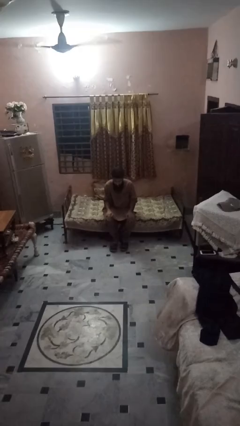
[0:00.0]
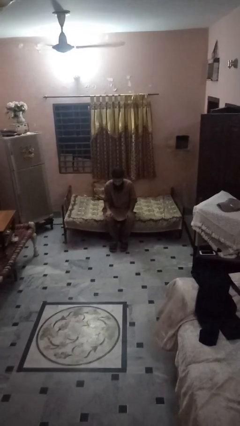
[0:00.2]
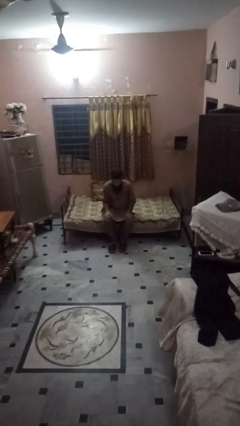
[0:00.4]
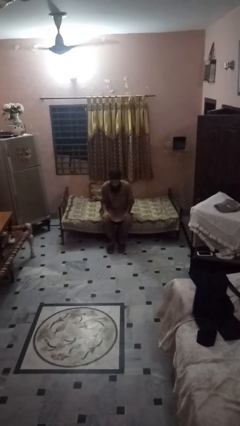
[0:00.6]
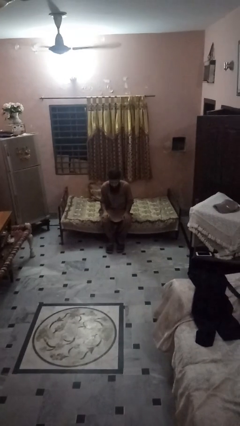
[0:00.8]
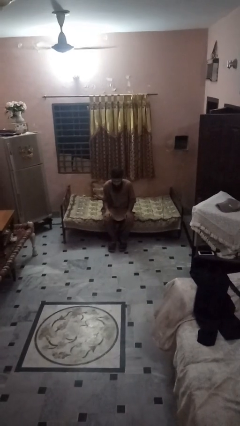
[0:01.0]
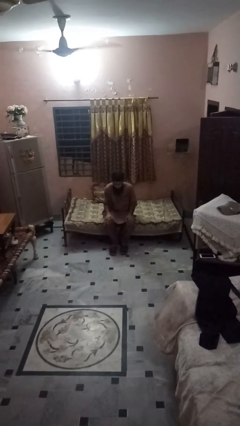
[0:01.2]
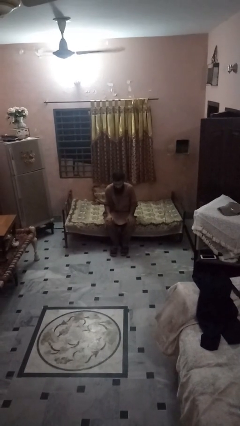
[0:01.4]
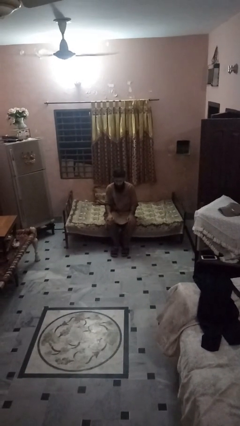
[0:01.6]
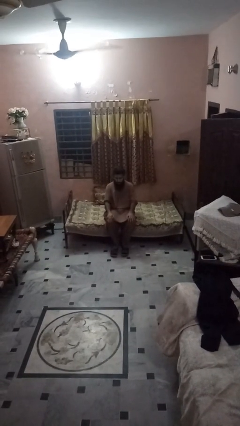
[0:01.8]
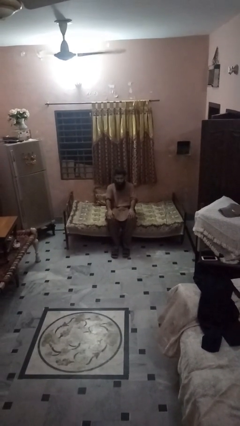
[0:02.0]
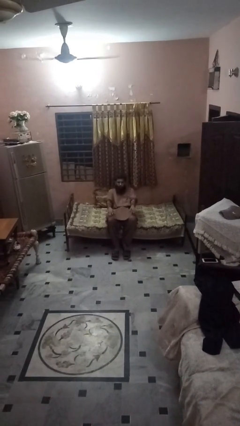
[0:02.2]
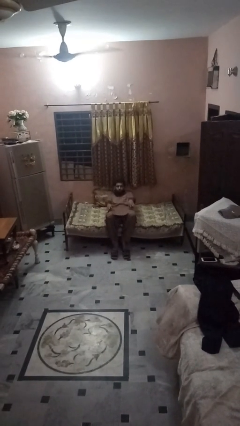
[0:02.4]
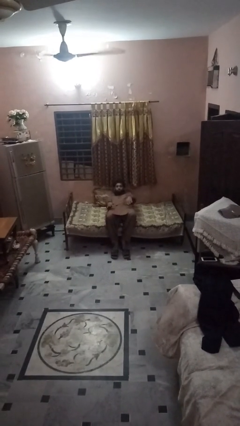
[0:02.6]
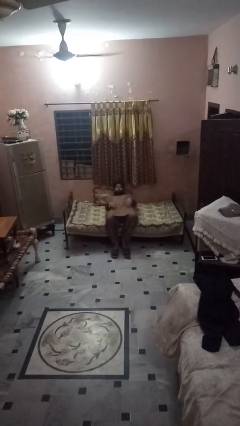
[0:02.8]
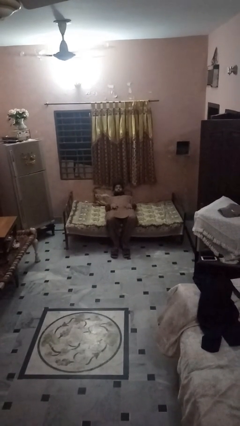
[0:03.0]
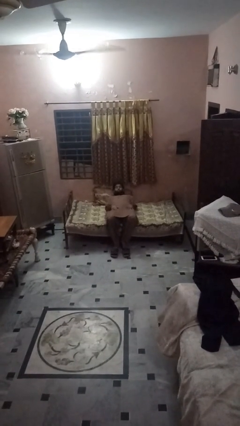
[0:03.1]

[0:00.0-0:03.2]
person lies down on bed

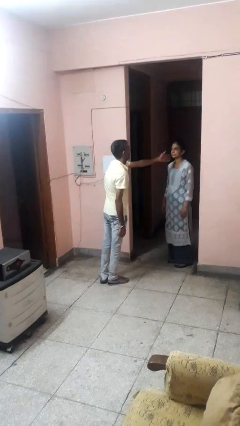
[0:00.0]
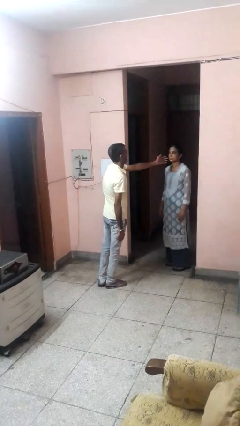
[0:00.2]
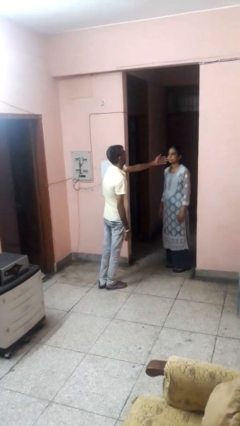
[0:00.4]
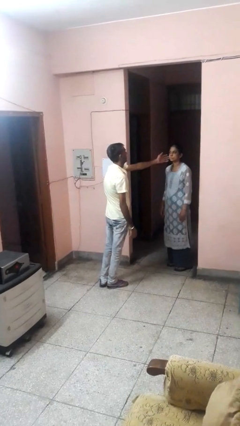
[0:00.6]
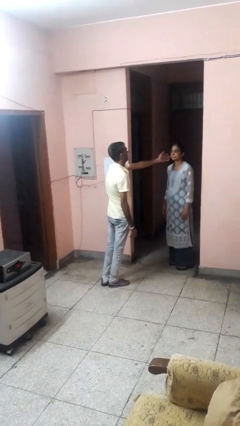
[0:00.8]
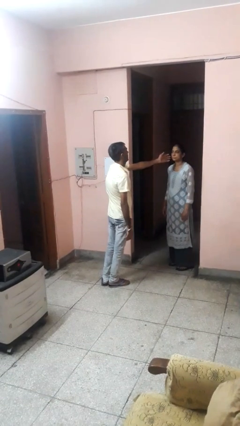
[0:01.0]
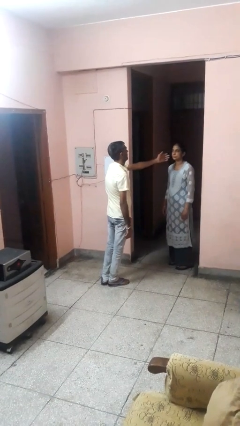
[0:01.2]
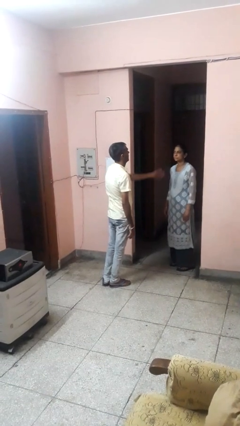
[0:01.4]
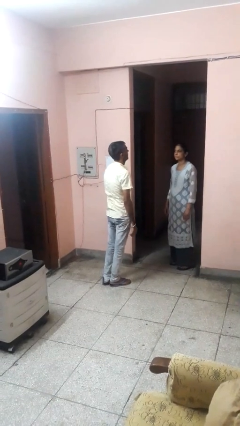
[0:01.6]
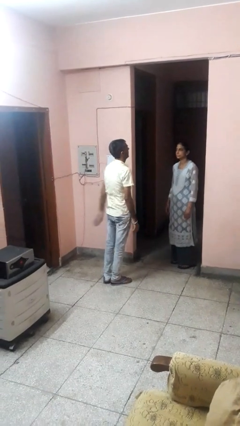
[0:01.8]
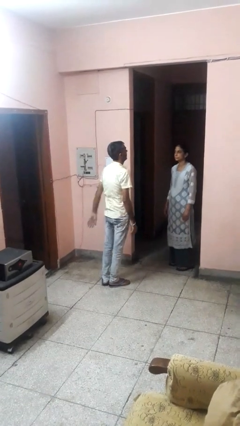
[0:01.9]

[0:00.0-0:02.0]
person touches face of person

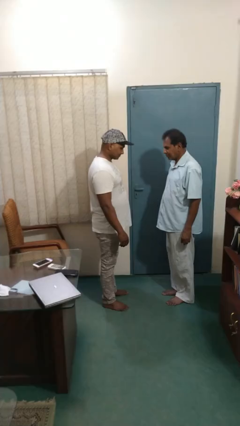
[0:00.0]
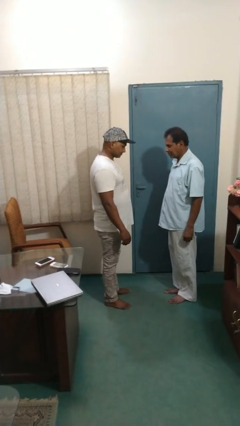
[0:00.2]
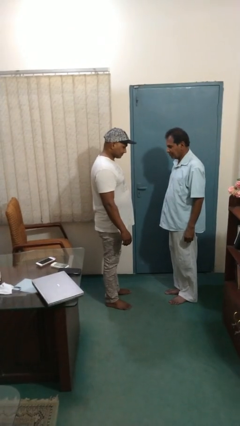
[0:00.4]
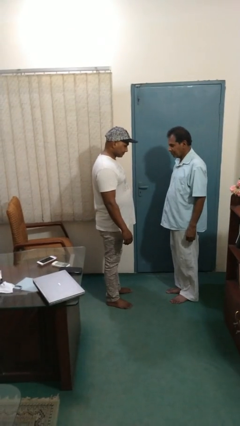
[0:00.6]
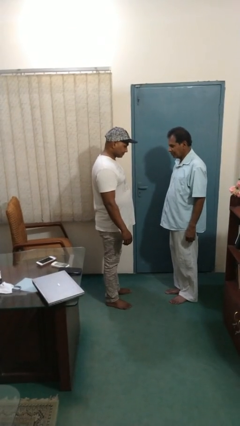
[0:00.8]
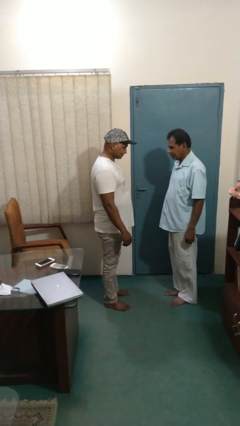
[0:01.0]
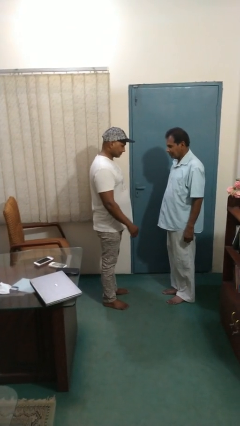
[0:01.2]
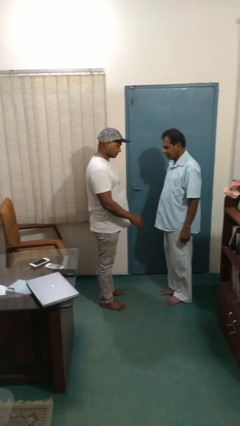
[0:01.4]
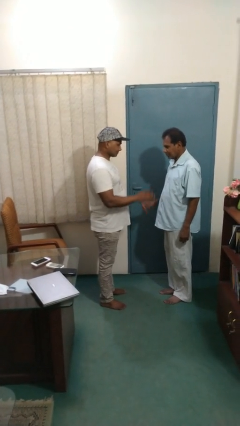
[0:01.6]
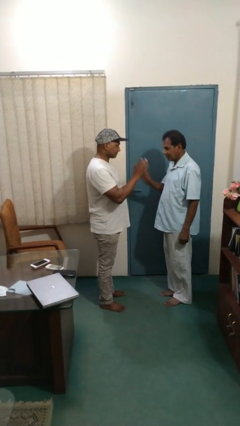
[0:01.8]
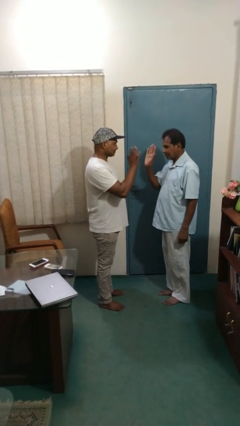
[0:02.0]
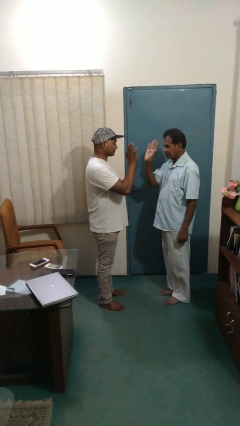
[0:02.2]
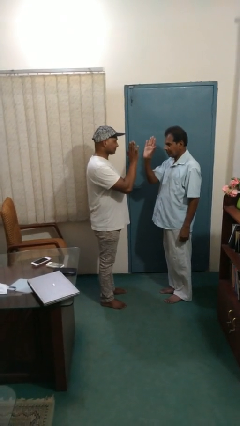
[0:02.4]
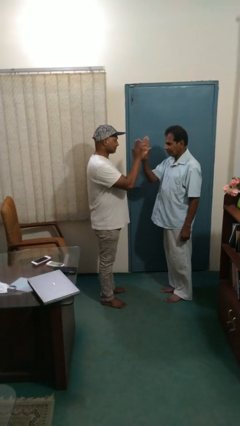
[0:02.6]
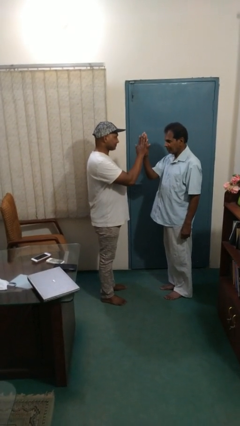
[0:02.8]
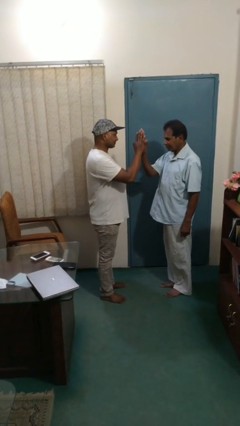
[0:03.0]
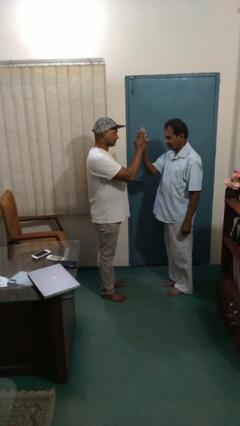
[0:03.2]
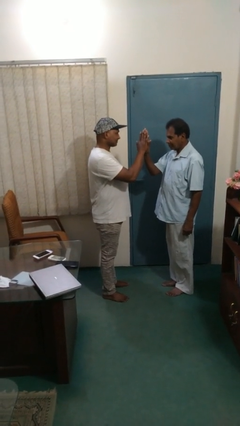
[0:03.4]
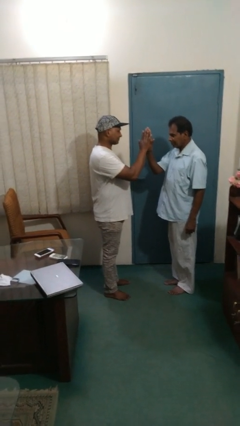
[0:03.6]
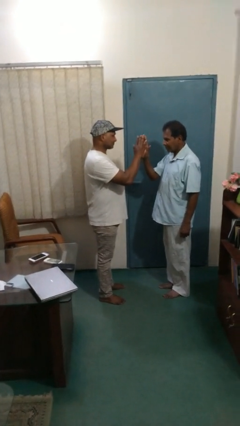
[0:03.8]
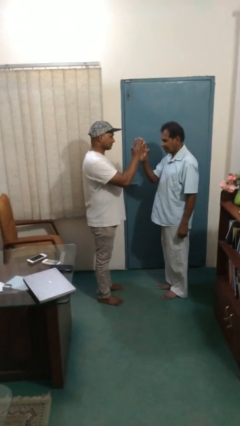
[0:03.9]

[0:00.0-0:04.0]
person highfives hand

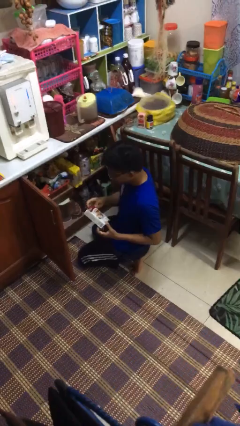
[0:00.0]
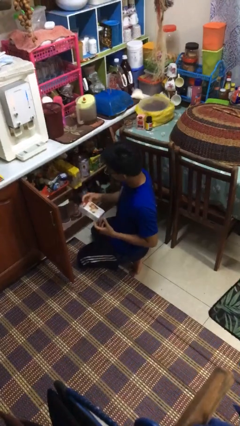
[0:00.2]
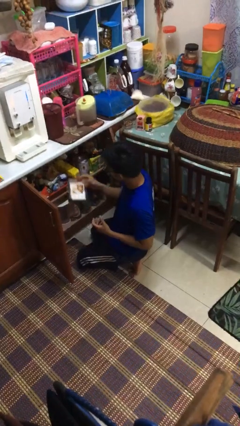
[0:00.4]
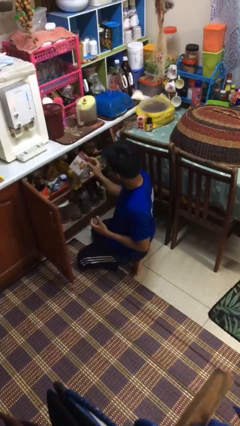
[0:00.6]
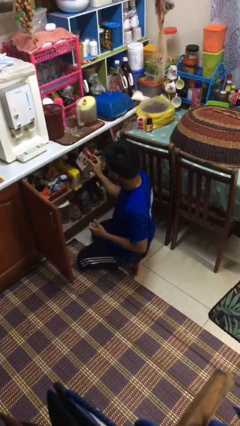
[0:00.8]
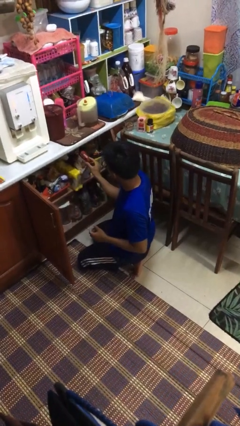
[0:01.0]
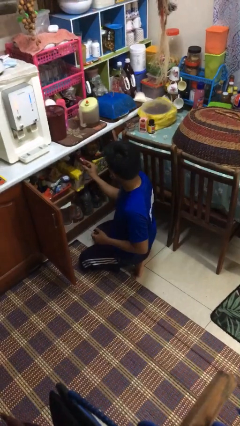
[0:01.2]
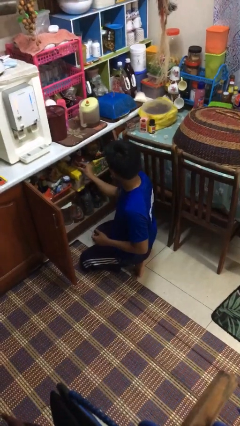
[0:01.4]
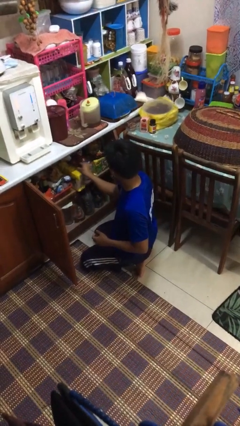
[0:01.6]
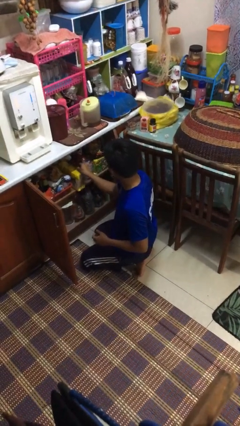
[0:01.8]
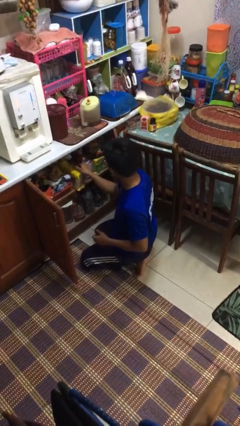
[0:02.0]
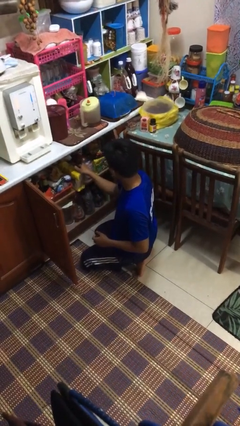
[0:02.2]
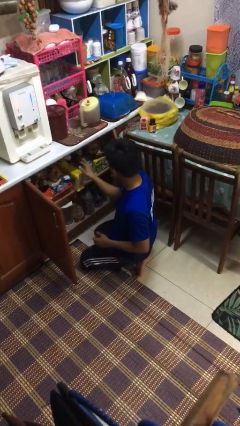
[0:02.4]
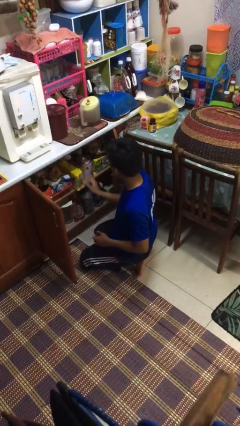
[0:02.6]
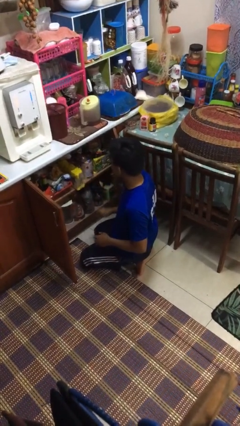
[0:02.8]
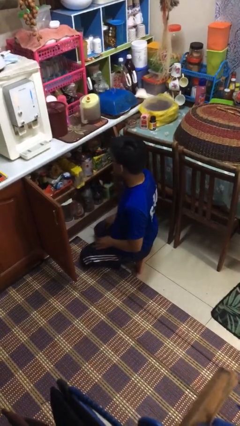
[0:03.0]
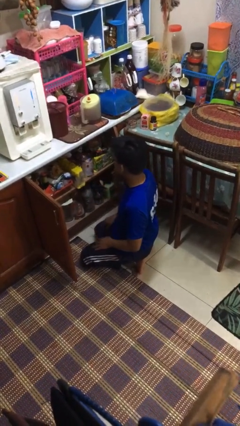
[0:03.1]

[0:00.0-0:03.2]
person puts object in cabinet

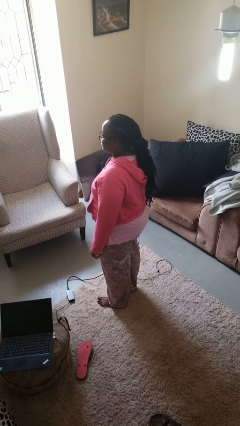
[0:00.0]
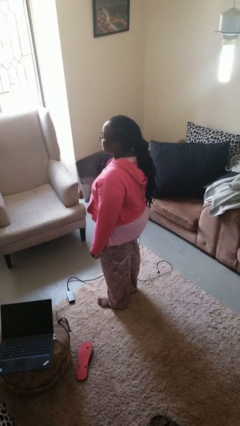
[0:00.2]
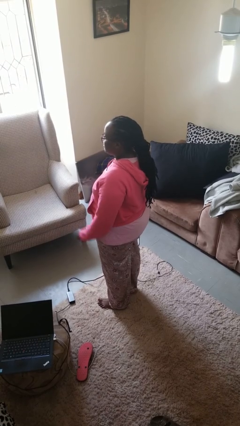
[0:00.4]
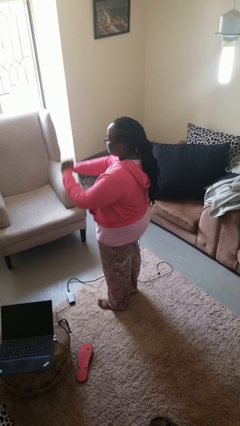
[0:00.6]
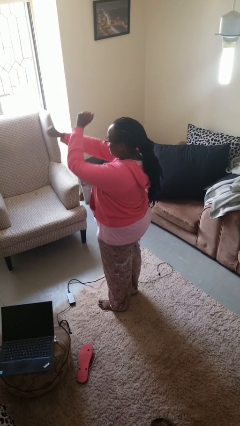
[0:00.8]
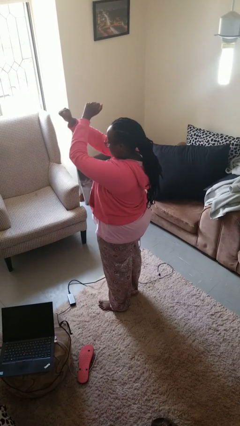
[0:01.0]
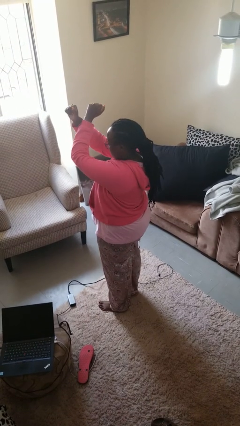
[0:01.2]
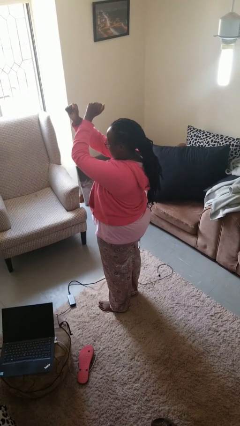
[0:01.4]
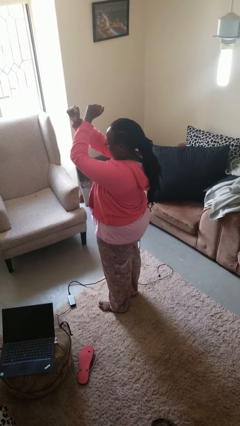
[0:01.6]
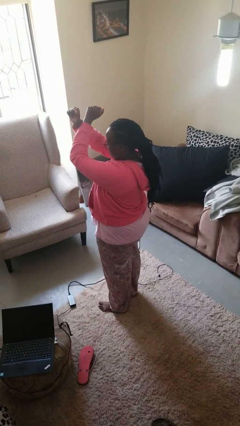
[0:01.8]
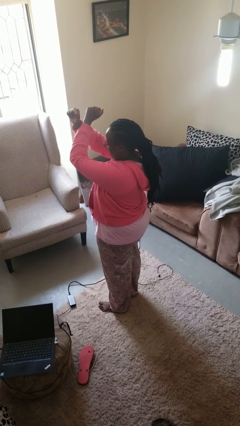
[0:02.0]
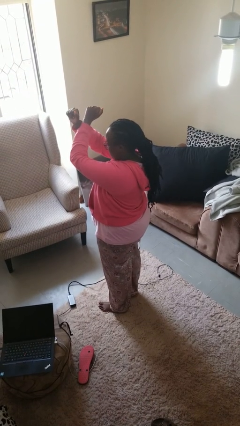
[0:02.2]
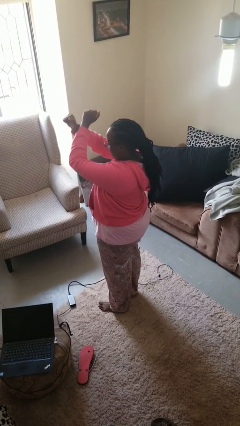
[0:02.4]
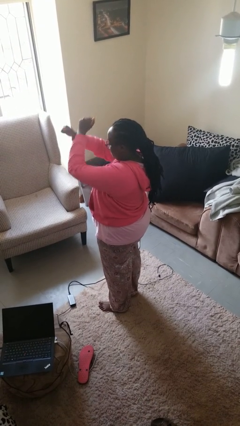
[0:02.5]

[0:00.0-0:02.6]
person gestures arms x

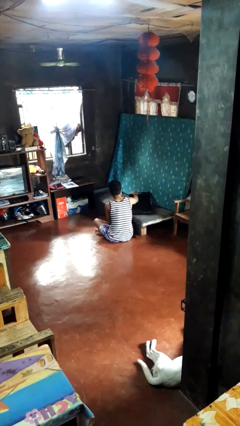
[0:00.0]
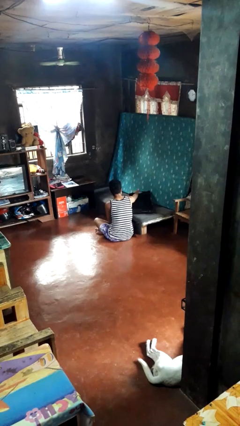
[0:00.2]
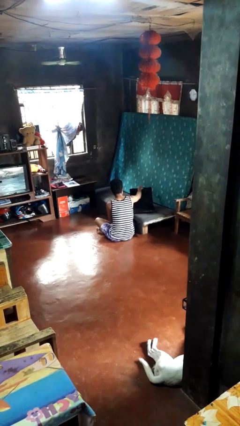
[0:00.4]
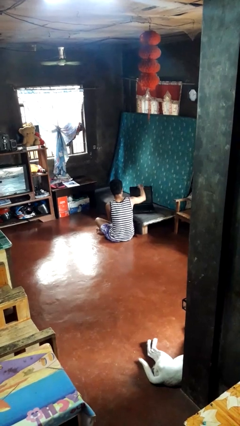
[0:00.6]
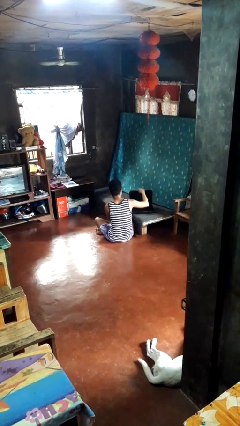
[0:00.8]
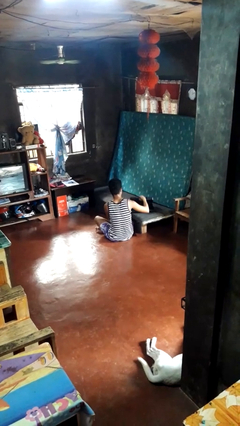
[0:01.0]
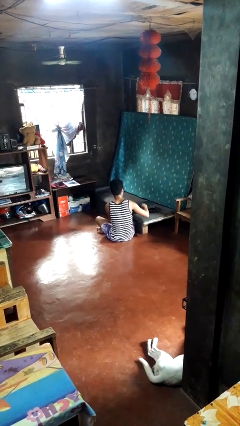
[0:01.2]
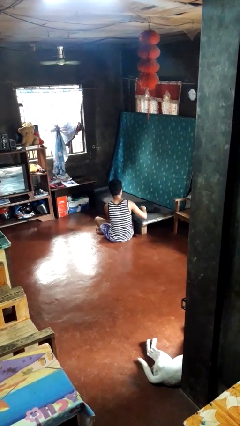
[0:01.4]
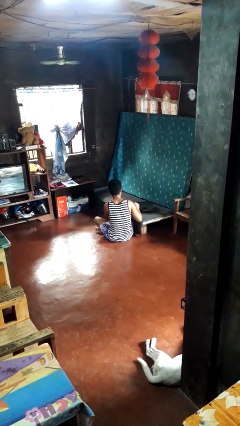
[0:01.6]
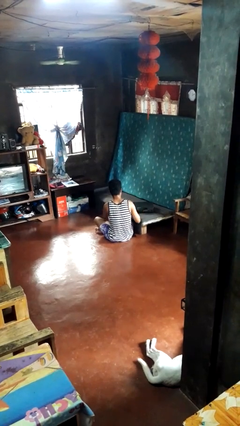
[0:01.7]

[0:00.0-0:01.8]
person closes suitcase

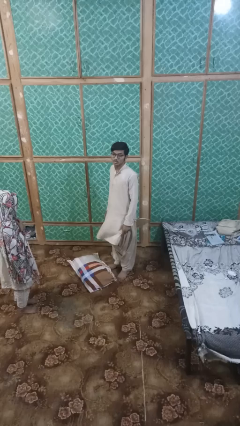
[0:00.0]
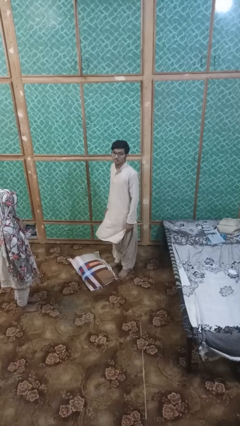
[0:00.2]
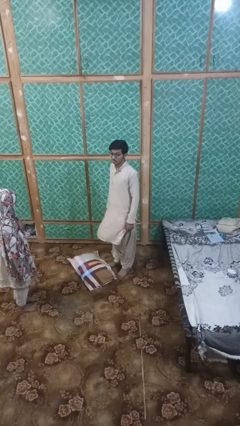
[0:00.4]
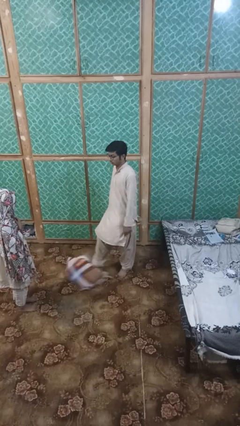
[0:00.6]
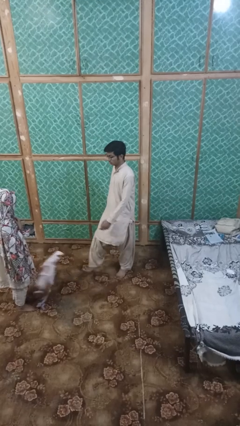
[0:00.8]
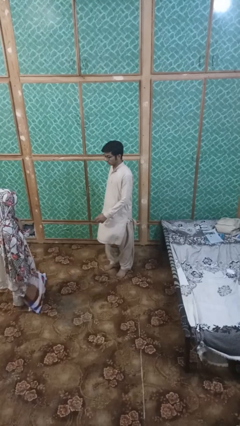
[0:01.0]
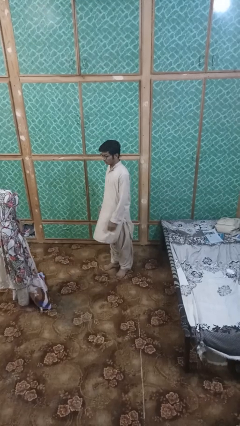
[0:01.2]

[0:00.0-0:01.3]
person kicks object to person
